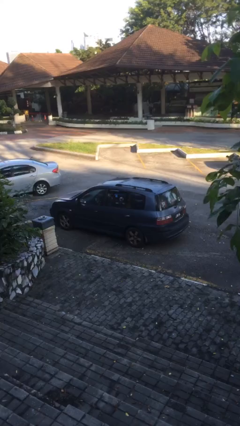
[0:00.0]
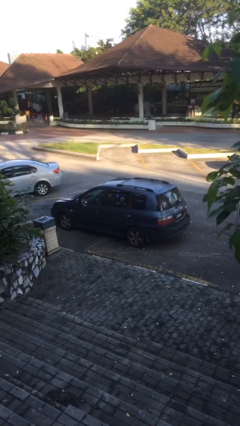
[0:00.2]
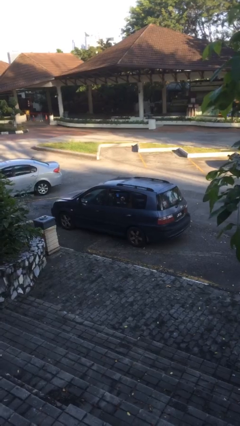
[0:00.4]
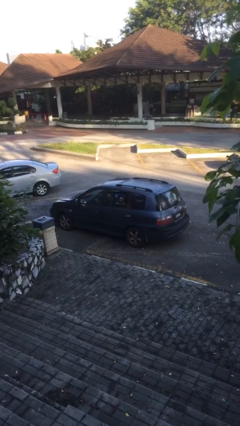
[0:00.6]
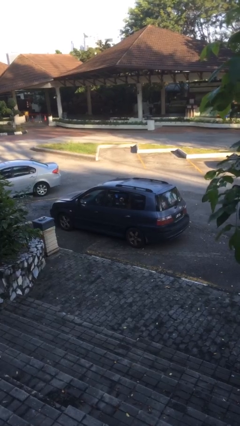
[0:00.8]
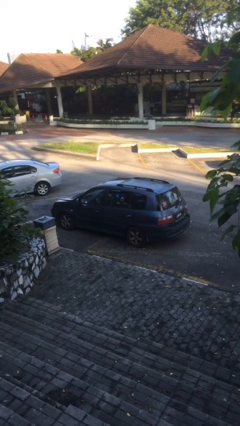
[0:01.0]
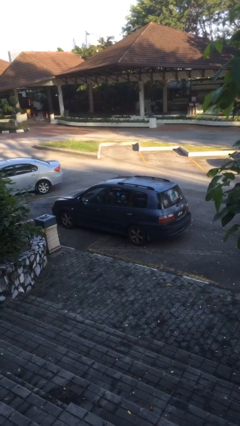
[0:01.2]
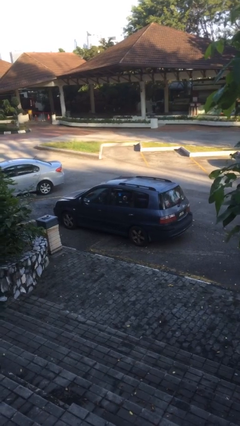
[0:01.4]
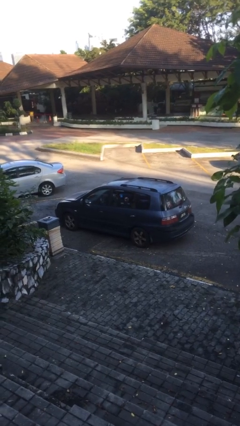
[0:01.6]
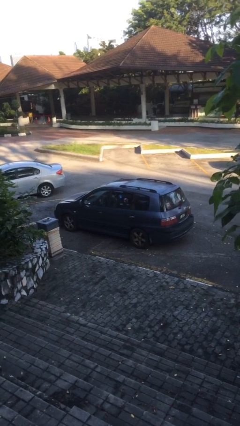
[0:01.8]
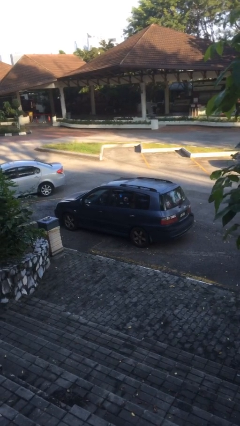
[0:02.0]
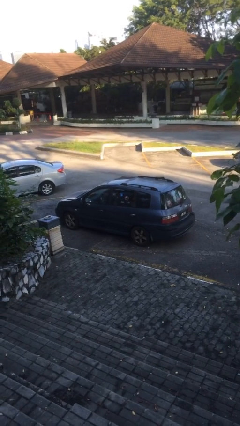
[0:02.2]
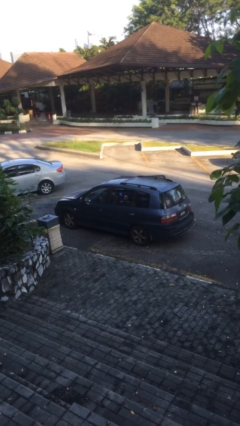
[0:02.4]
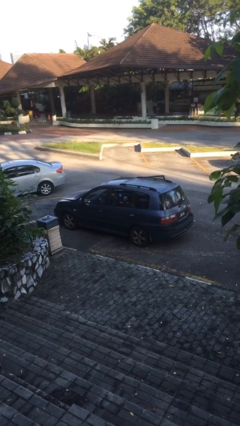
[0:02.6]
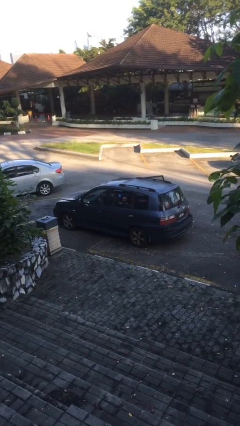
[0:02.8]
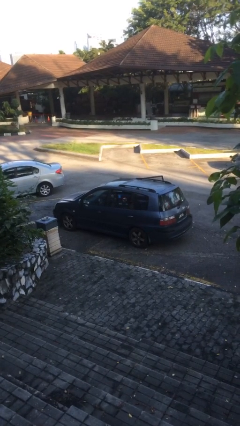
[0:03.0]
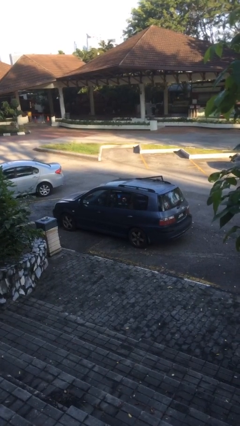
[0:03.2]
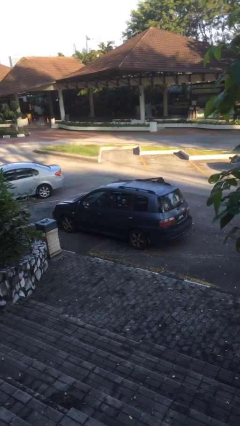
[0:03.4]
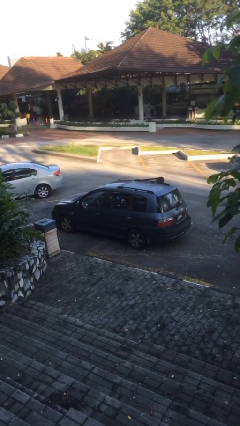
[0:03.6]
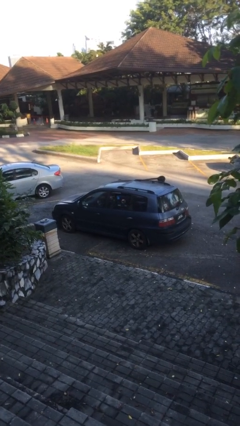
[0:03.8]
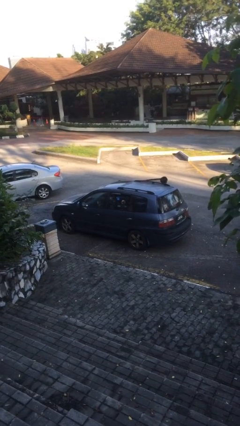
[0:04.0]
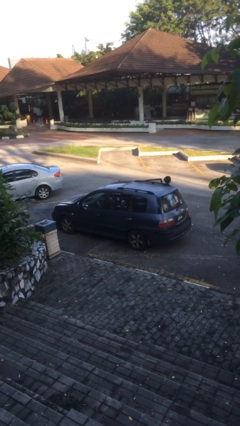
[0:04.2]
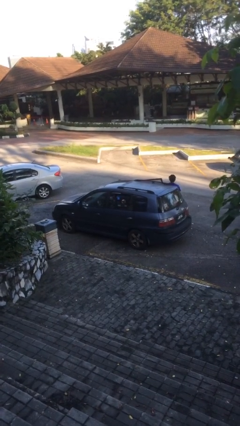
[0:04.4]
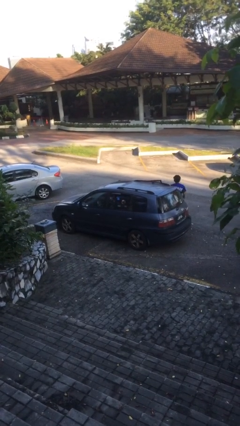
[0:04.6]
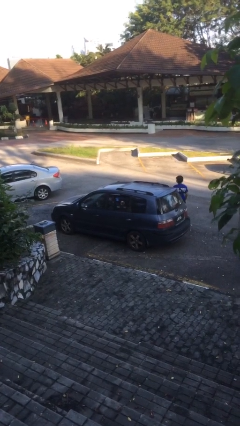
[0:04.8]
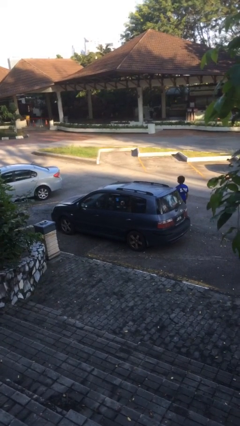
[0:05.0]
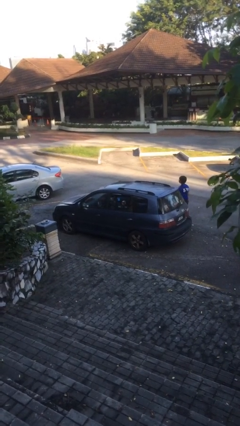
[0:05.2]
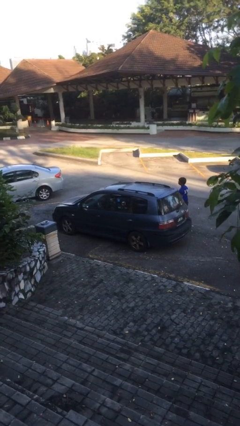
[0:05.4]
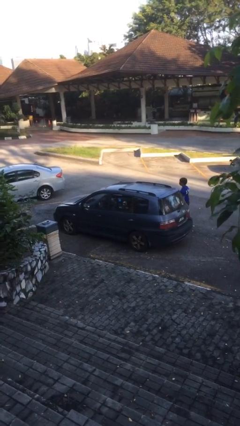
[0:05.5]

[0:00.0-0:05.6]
car drops off person

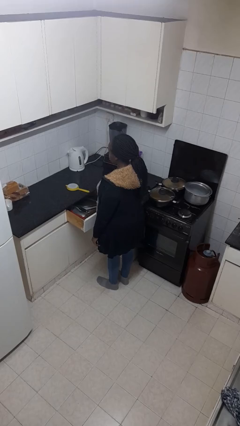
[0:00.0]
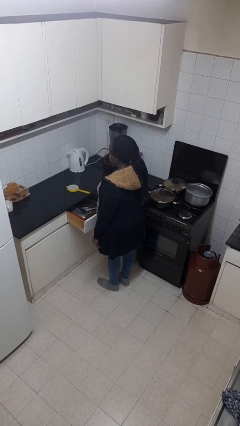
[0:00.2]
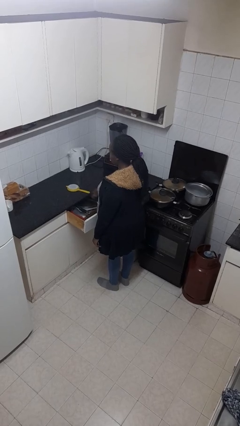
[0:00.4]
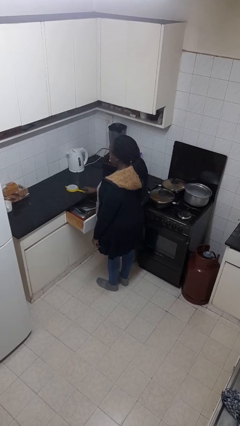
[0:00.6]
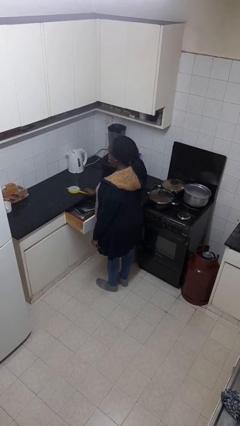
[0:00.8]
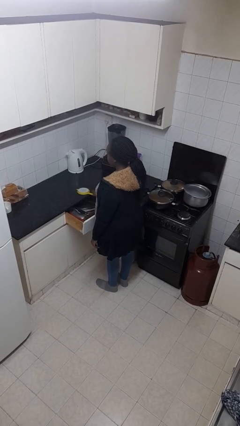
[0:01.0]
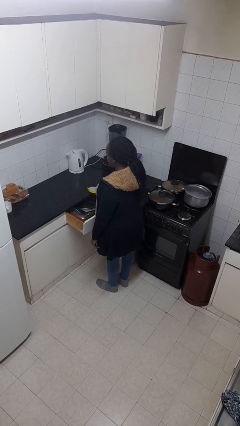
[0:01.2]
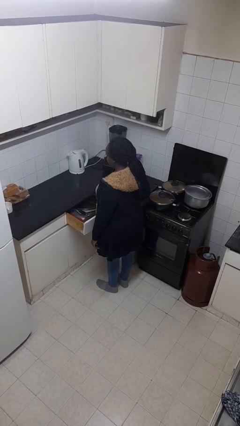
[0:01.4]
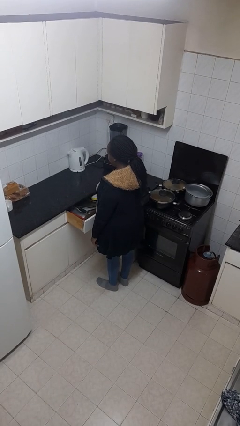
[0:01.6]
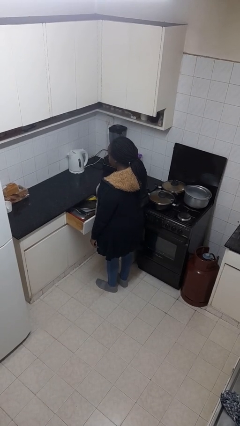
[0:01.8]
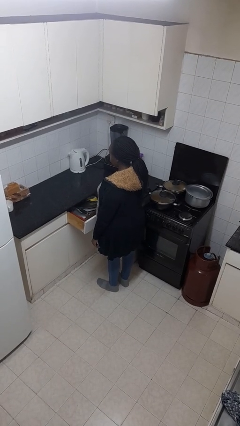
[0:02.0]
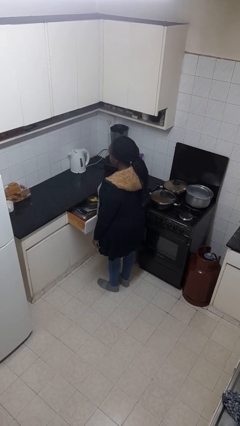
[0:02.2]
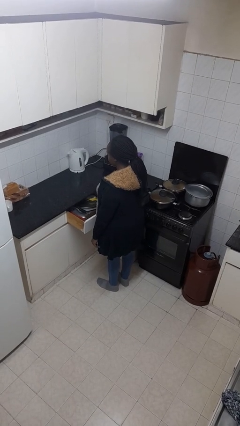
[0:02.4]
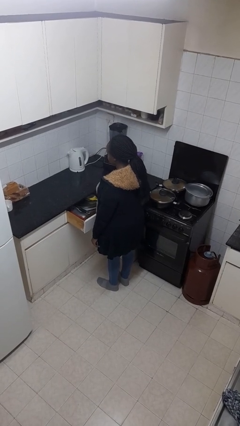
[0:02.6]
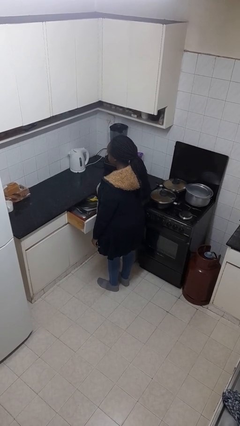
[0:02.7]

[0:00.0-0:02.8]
person puts object into kitchen drawer

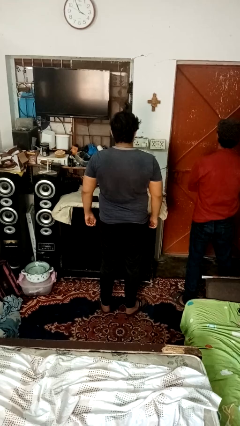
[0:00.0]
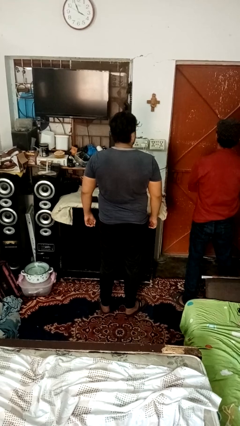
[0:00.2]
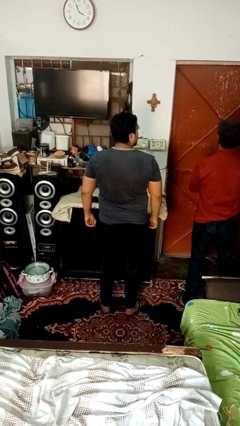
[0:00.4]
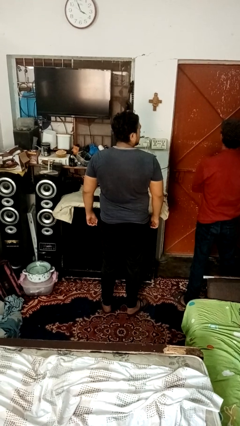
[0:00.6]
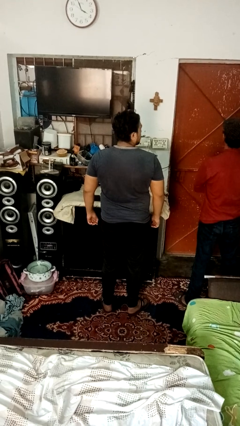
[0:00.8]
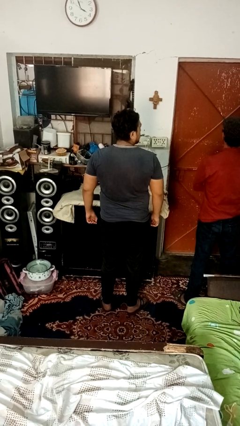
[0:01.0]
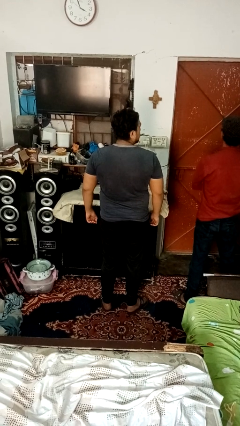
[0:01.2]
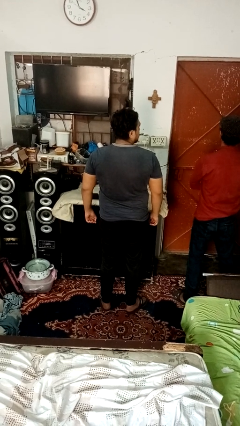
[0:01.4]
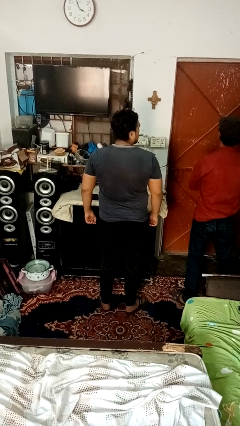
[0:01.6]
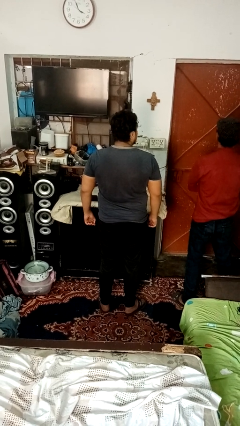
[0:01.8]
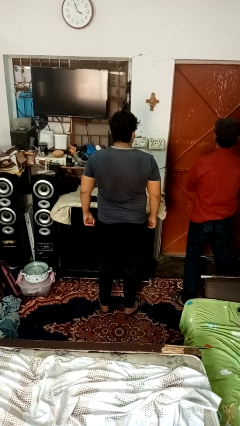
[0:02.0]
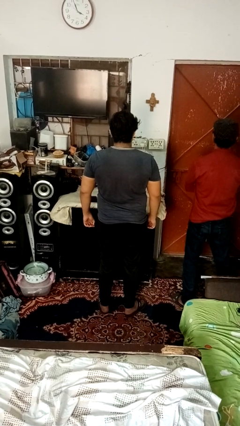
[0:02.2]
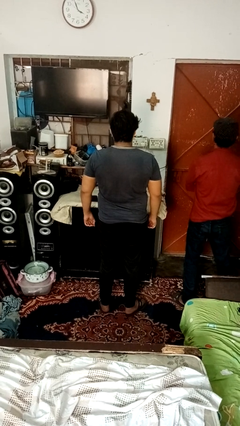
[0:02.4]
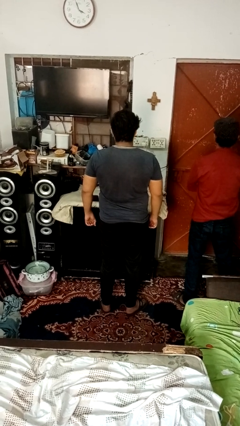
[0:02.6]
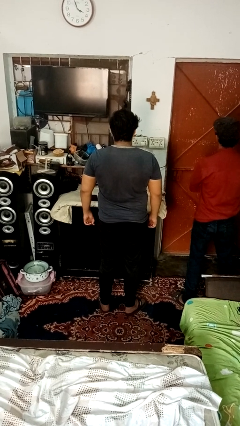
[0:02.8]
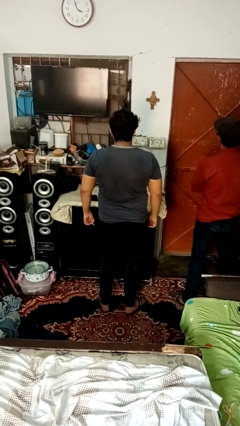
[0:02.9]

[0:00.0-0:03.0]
person looks over shoulder

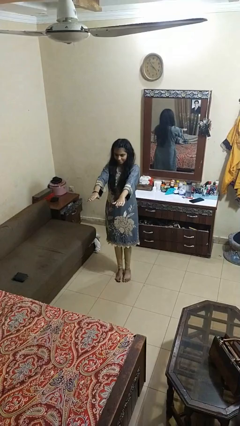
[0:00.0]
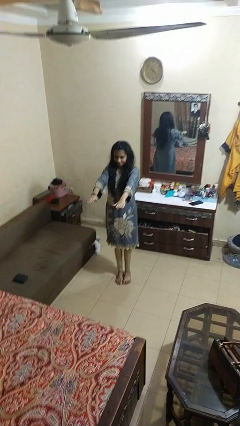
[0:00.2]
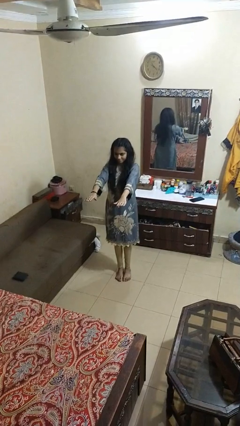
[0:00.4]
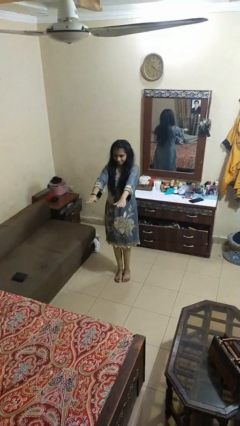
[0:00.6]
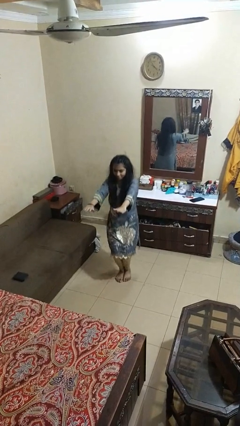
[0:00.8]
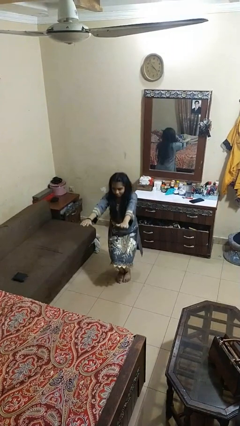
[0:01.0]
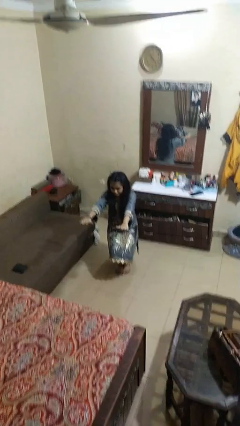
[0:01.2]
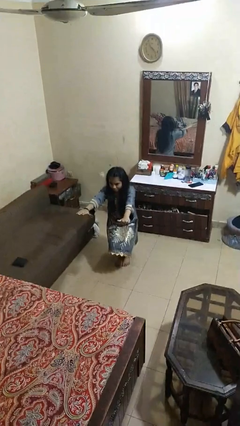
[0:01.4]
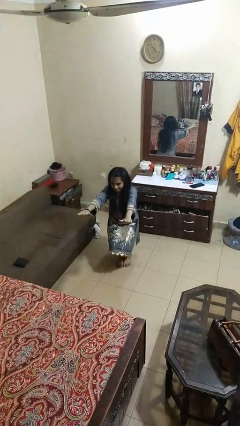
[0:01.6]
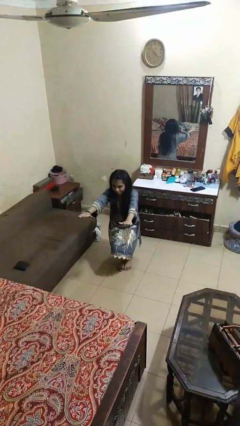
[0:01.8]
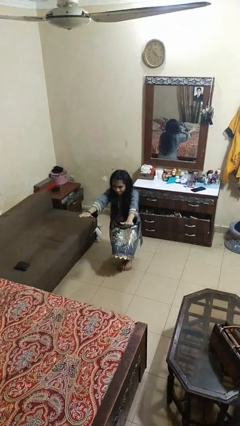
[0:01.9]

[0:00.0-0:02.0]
person squats

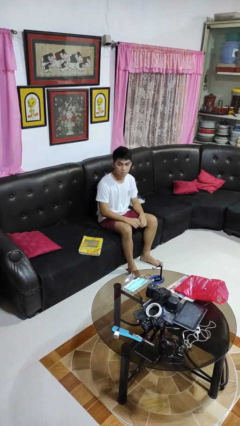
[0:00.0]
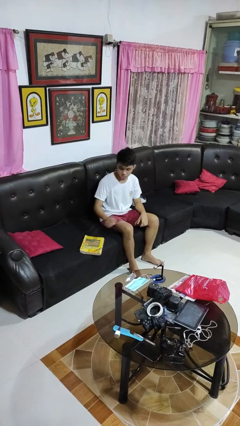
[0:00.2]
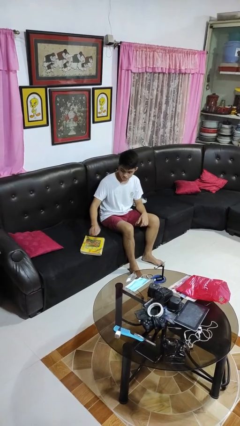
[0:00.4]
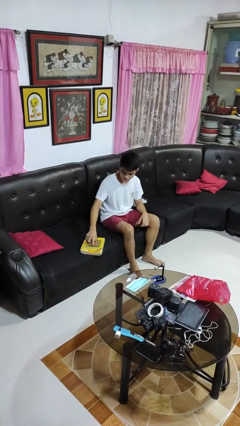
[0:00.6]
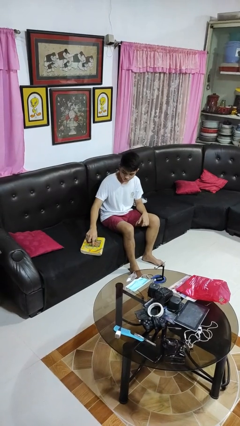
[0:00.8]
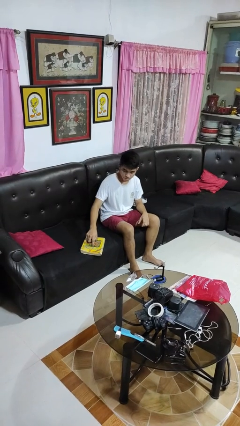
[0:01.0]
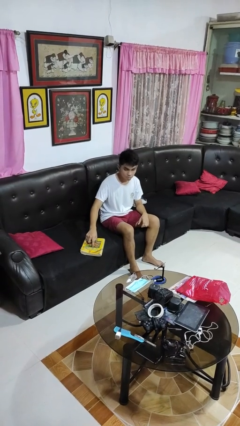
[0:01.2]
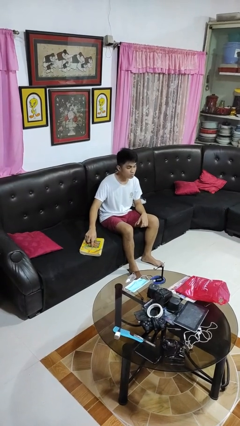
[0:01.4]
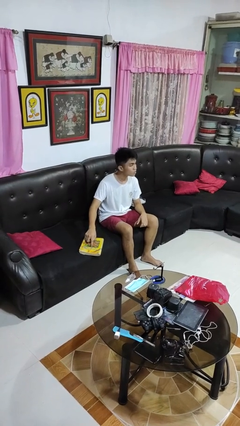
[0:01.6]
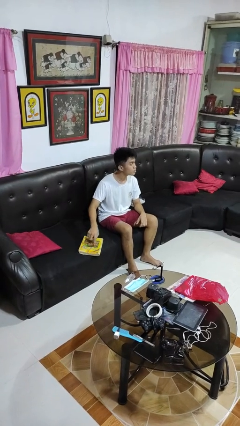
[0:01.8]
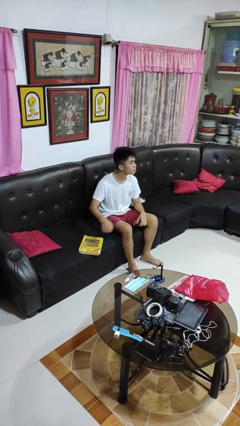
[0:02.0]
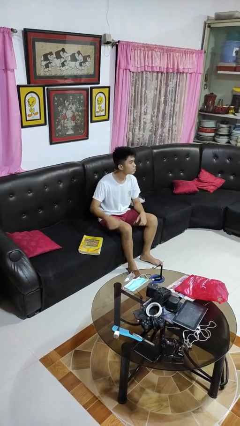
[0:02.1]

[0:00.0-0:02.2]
person taps object with finger

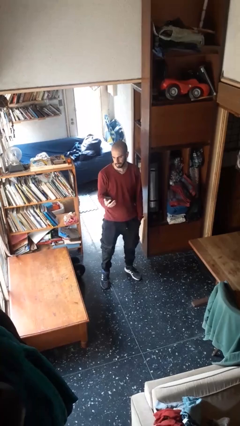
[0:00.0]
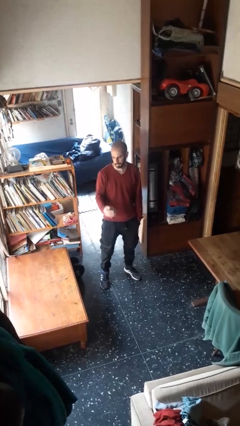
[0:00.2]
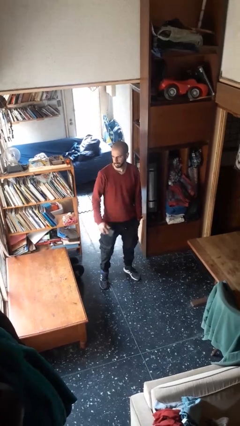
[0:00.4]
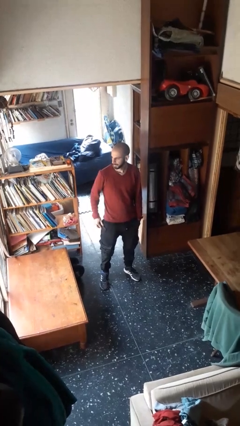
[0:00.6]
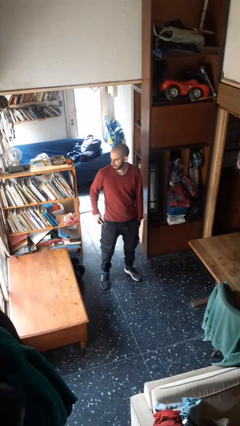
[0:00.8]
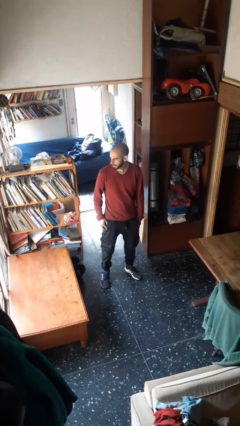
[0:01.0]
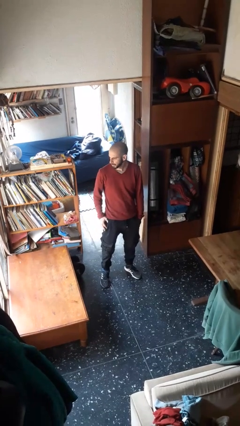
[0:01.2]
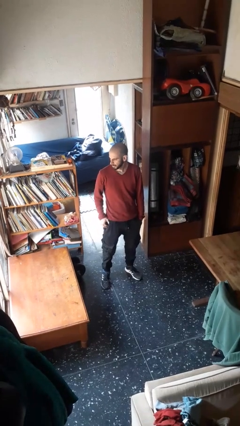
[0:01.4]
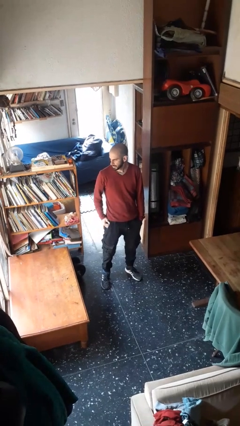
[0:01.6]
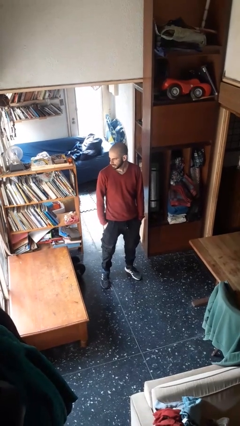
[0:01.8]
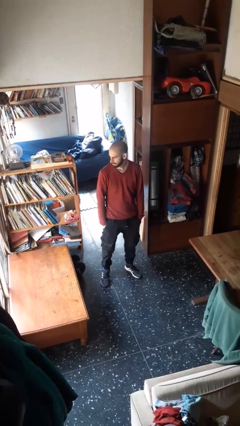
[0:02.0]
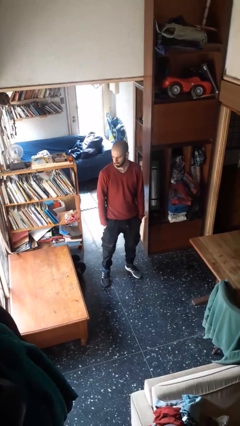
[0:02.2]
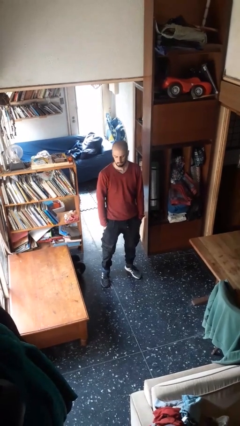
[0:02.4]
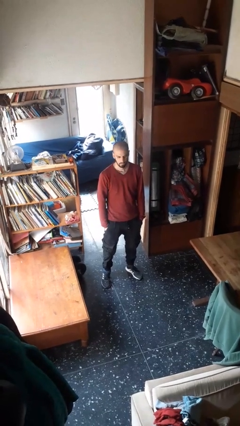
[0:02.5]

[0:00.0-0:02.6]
person puts phone into pocket
